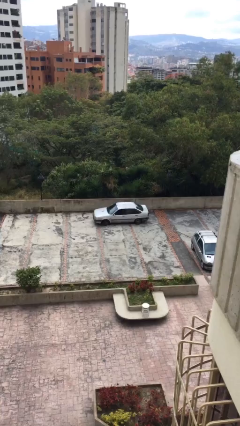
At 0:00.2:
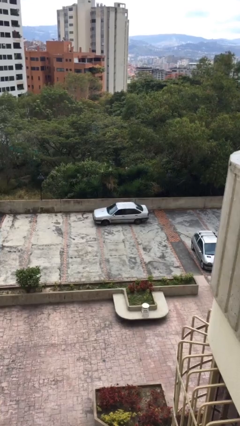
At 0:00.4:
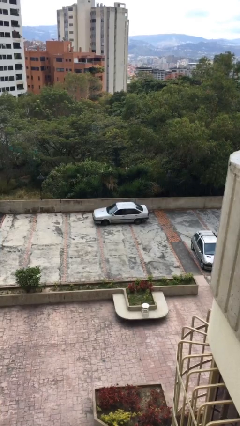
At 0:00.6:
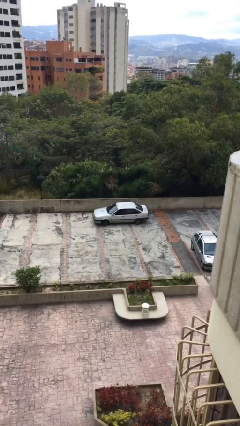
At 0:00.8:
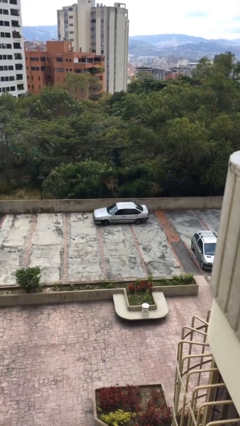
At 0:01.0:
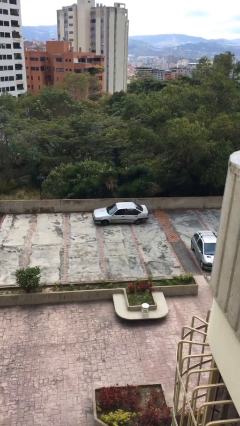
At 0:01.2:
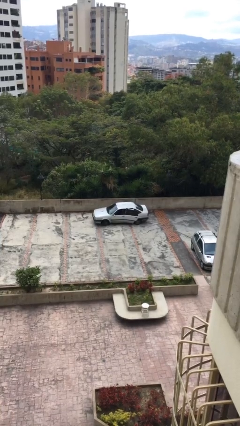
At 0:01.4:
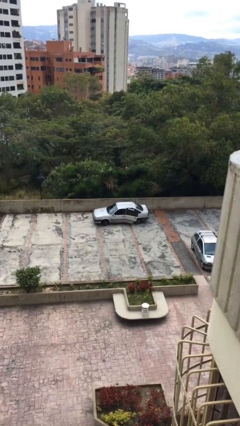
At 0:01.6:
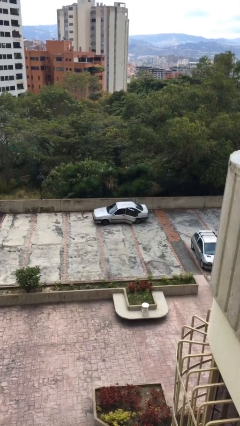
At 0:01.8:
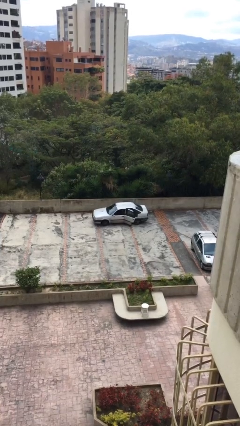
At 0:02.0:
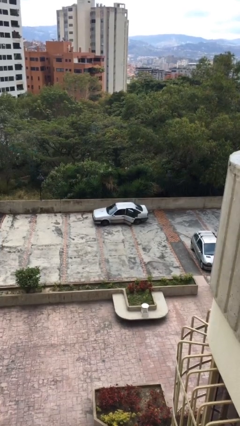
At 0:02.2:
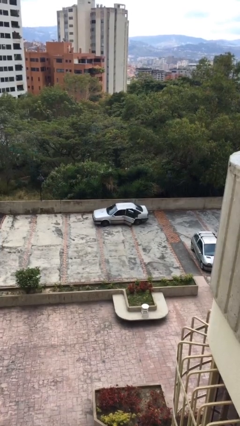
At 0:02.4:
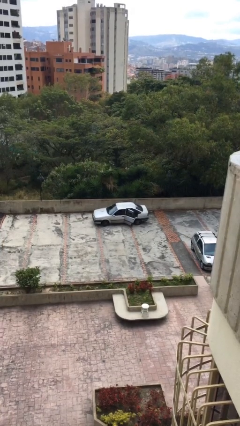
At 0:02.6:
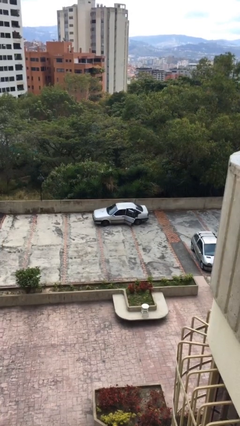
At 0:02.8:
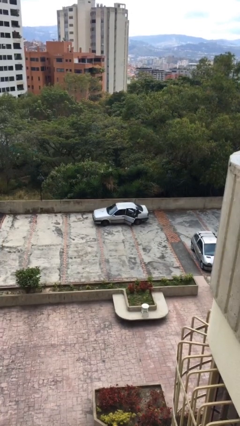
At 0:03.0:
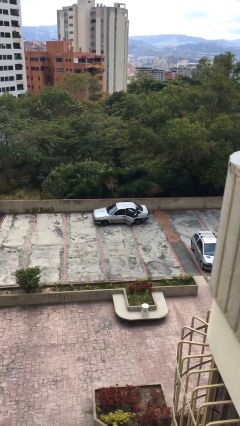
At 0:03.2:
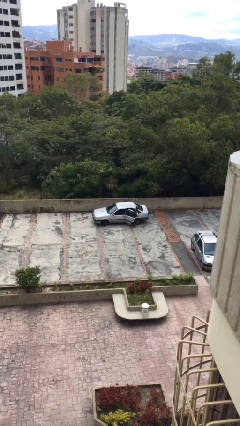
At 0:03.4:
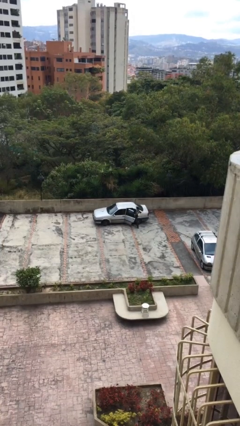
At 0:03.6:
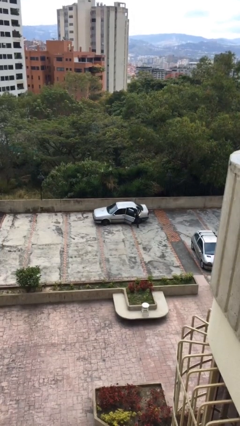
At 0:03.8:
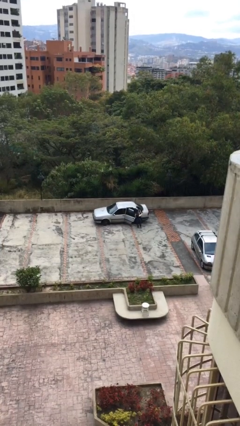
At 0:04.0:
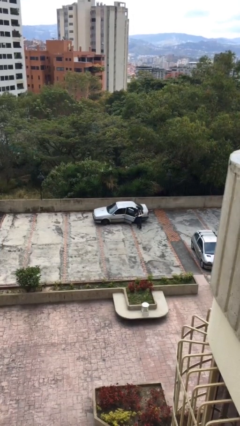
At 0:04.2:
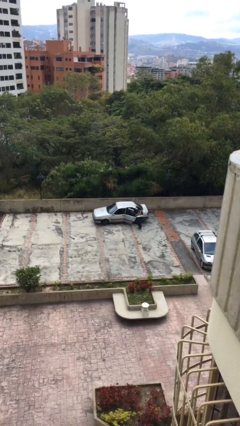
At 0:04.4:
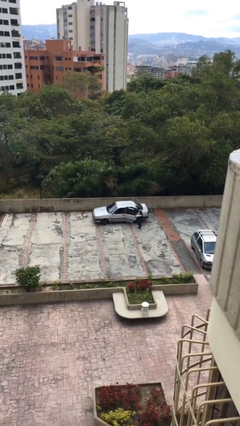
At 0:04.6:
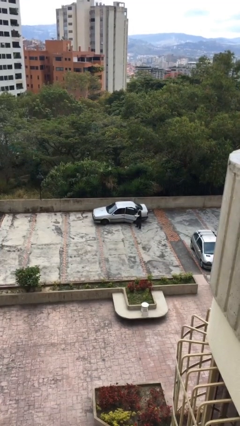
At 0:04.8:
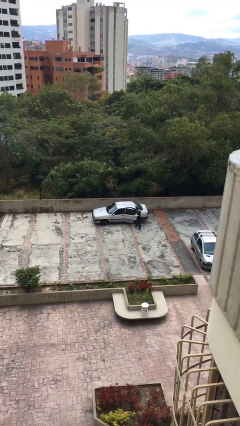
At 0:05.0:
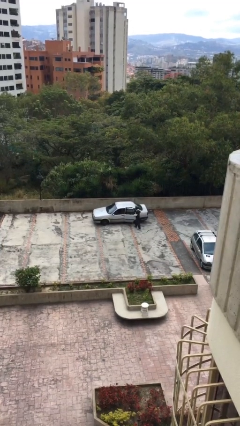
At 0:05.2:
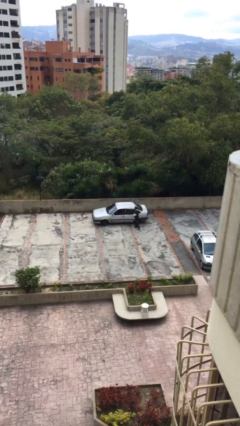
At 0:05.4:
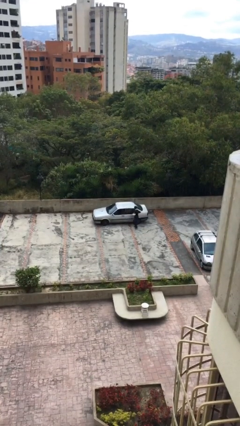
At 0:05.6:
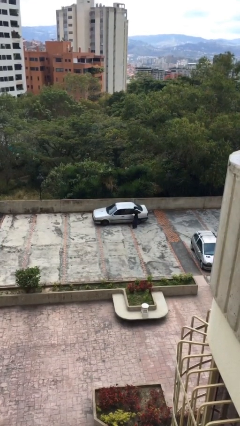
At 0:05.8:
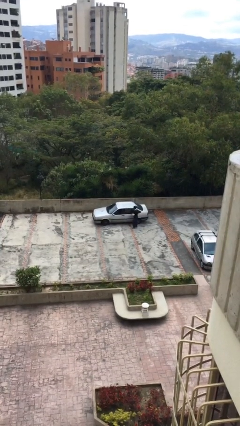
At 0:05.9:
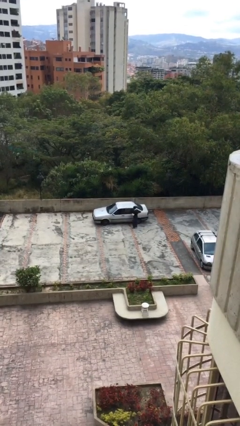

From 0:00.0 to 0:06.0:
car drops off person

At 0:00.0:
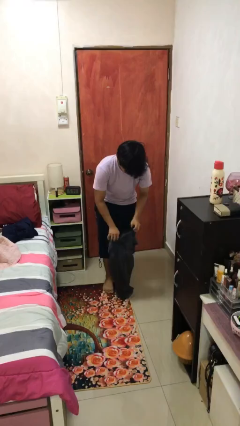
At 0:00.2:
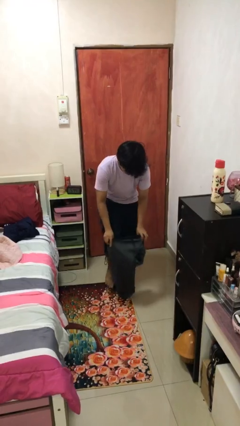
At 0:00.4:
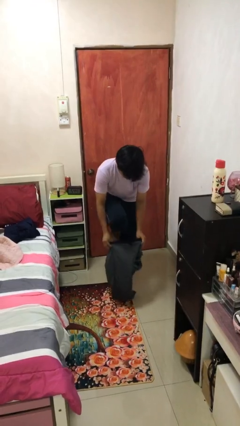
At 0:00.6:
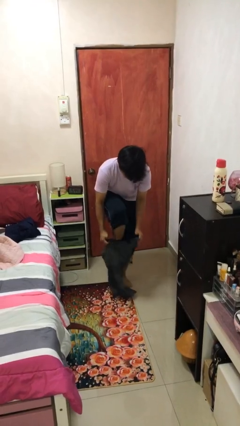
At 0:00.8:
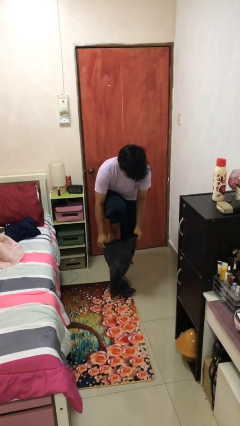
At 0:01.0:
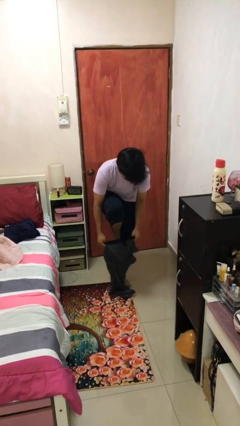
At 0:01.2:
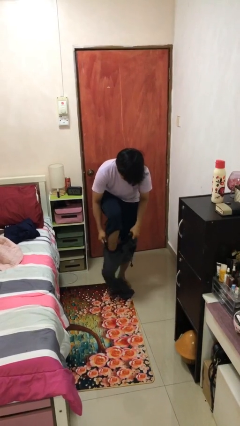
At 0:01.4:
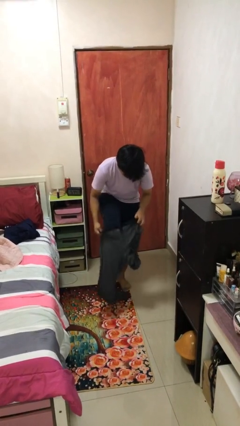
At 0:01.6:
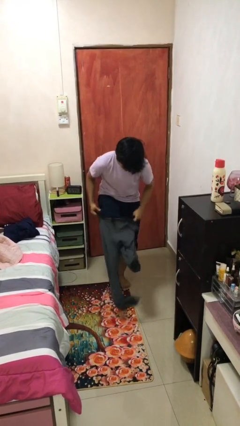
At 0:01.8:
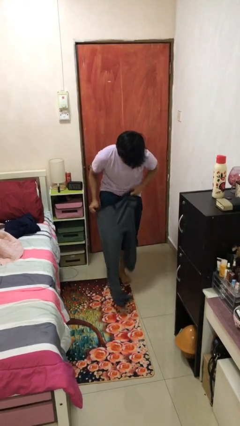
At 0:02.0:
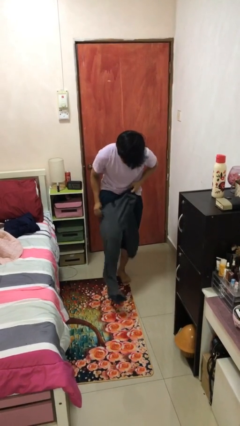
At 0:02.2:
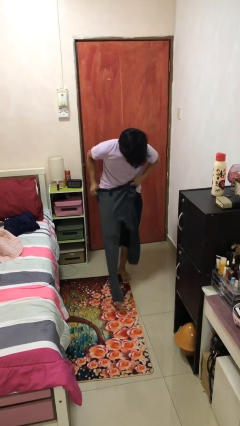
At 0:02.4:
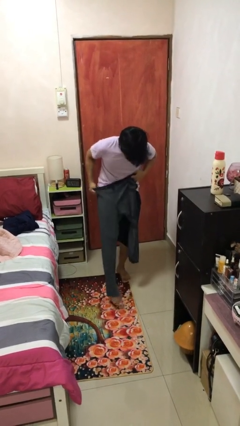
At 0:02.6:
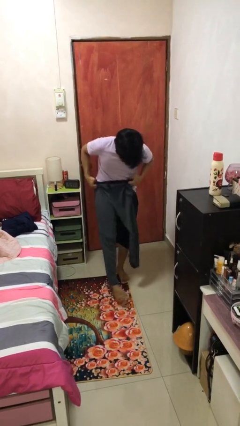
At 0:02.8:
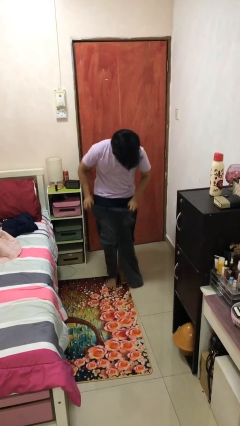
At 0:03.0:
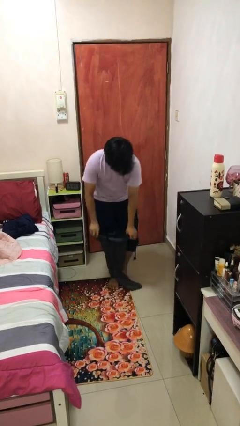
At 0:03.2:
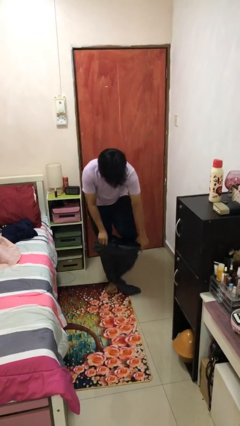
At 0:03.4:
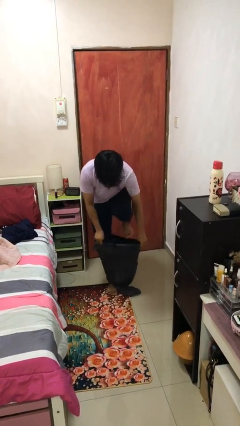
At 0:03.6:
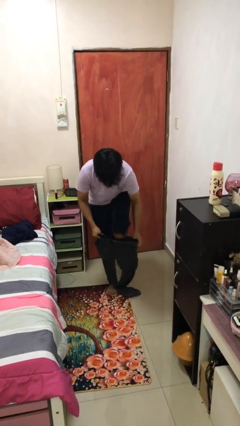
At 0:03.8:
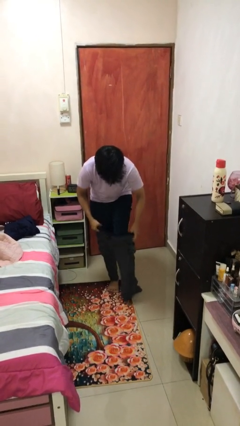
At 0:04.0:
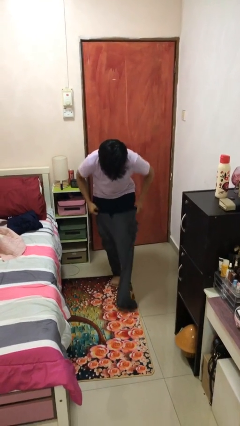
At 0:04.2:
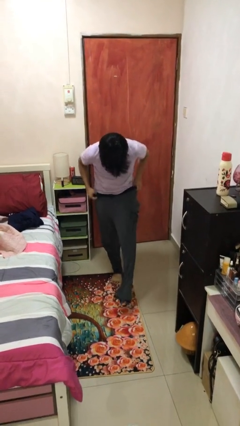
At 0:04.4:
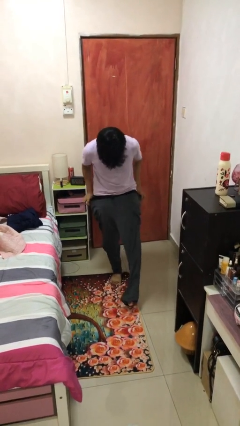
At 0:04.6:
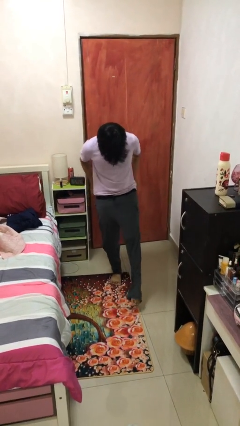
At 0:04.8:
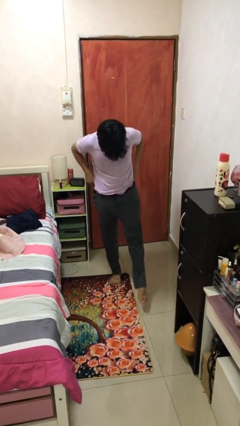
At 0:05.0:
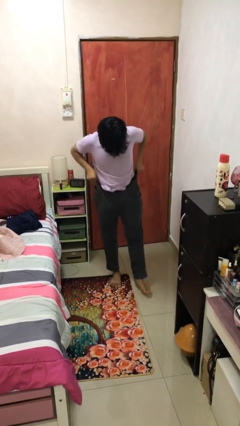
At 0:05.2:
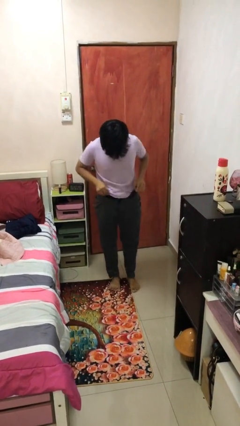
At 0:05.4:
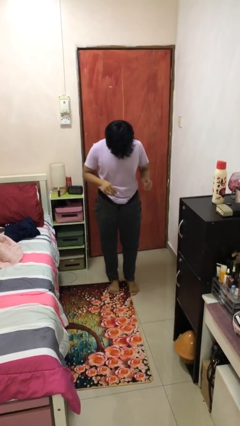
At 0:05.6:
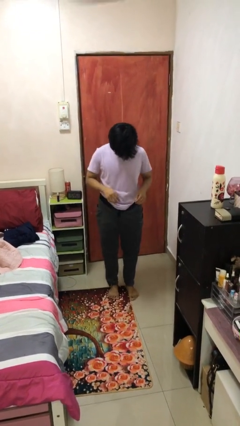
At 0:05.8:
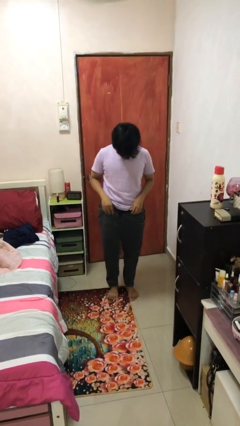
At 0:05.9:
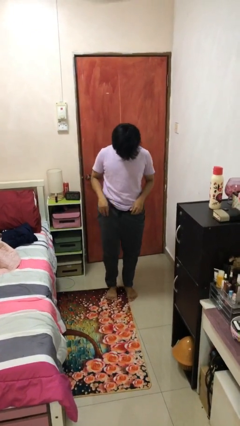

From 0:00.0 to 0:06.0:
person puts on pants

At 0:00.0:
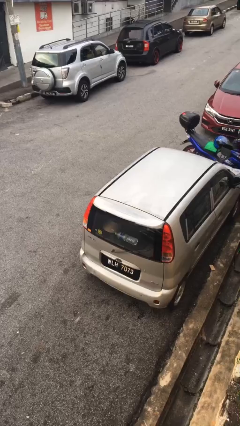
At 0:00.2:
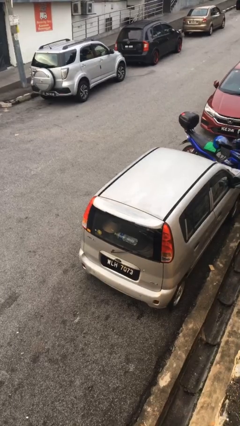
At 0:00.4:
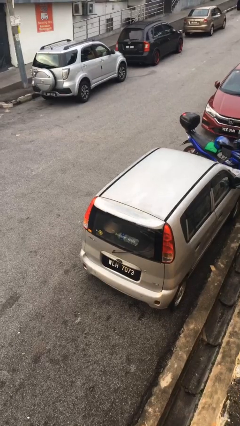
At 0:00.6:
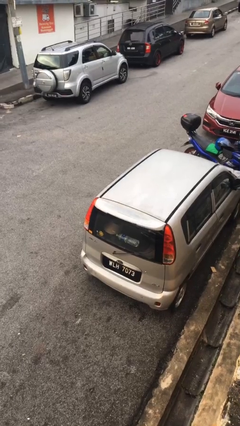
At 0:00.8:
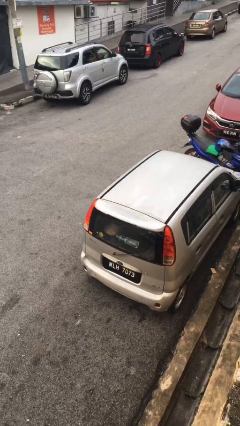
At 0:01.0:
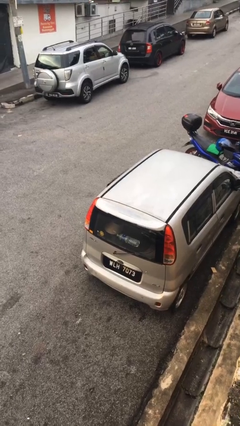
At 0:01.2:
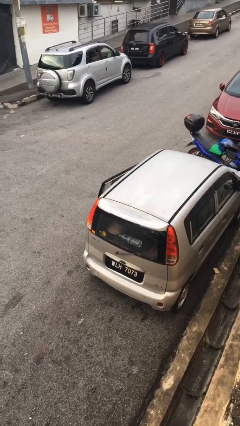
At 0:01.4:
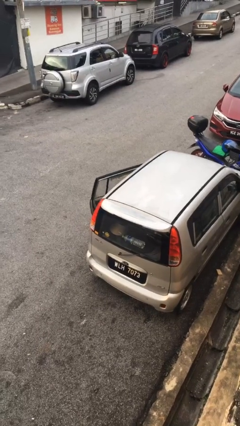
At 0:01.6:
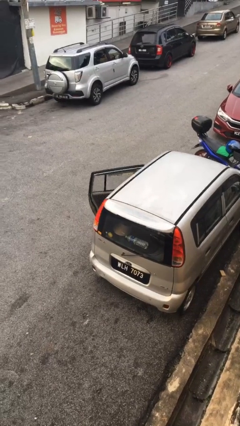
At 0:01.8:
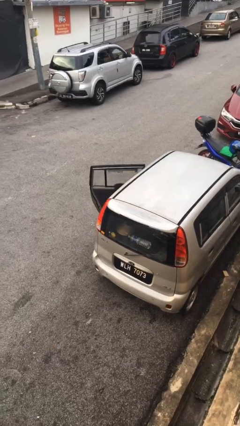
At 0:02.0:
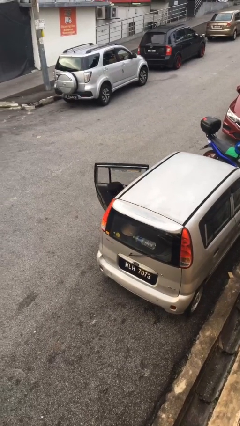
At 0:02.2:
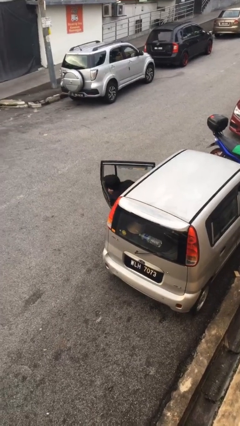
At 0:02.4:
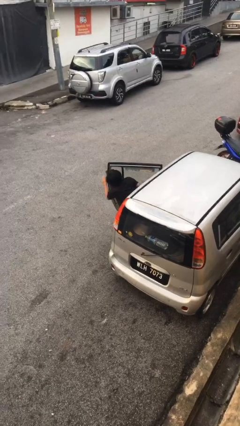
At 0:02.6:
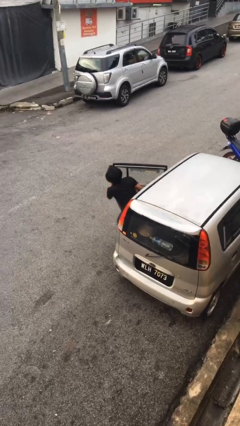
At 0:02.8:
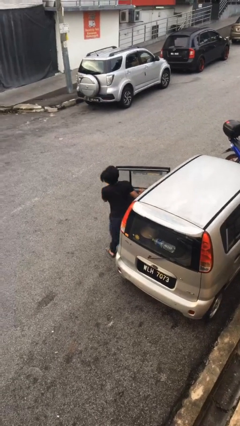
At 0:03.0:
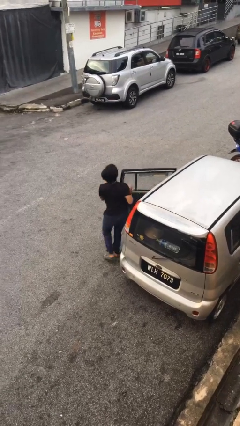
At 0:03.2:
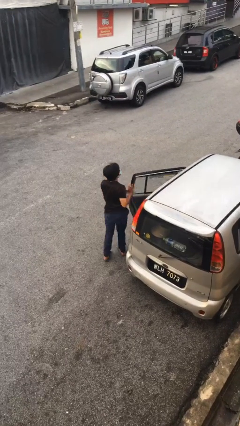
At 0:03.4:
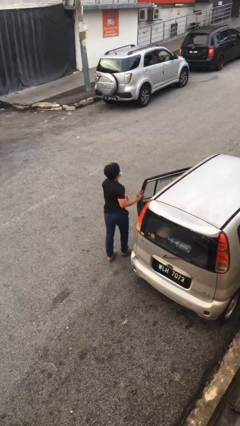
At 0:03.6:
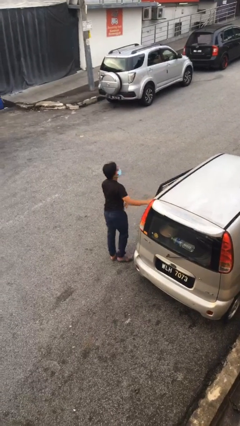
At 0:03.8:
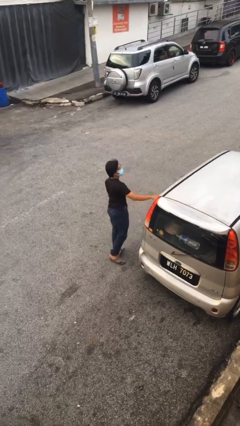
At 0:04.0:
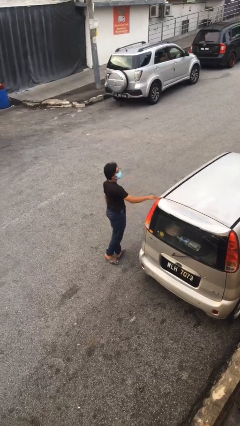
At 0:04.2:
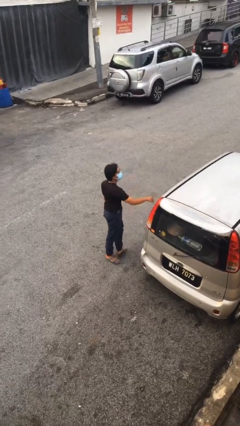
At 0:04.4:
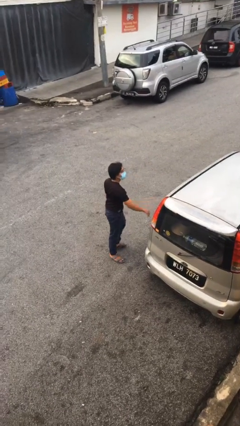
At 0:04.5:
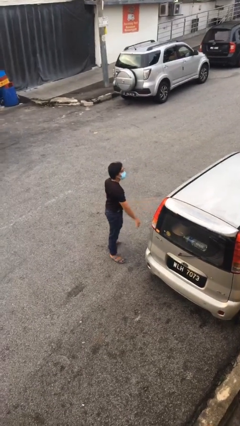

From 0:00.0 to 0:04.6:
person exits car

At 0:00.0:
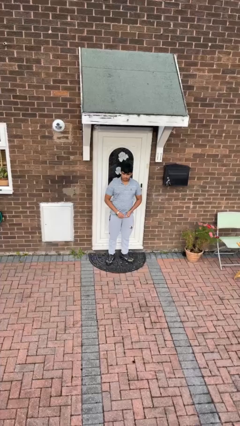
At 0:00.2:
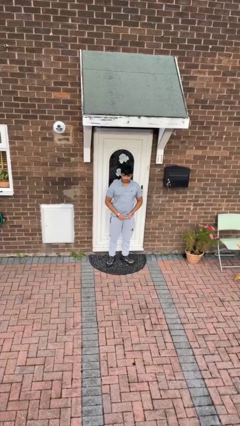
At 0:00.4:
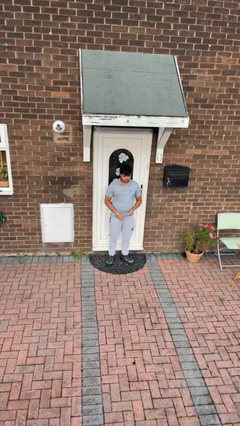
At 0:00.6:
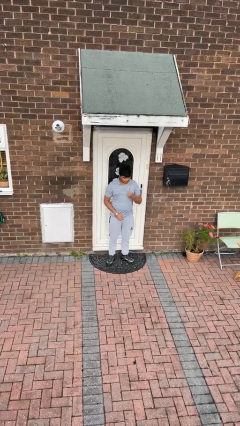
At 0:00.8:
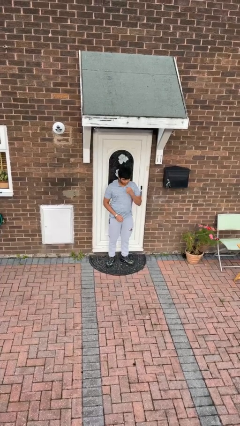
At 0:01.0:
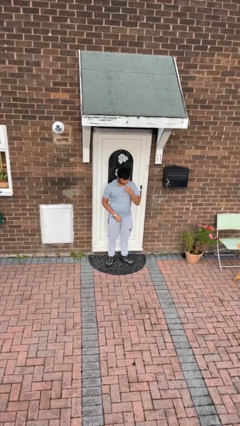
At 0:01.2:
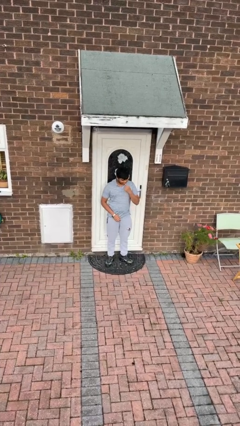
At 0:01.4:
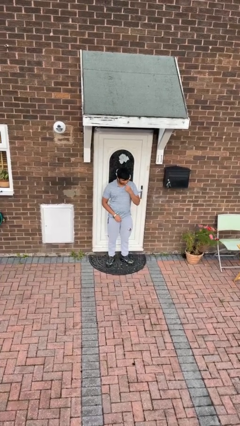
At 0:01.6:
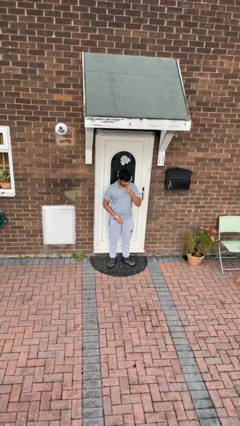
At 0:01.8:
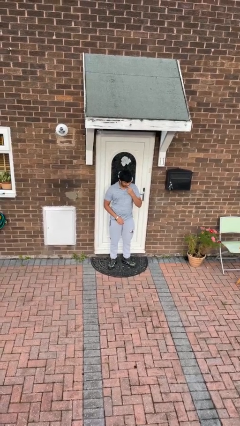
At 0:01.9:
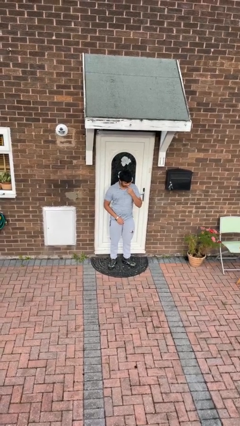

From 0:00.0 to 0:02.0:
person flosses
